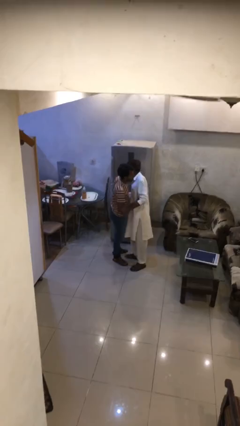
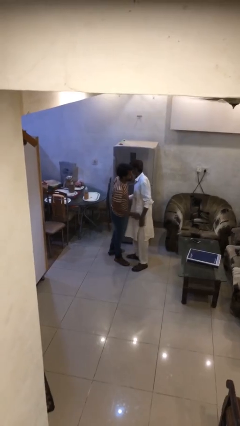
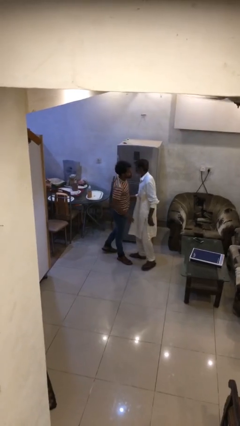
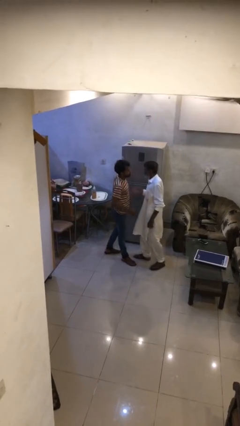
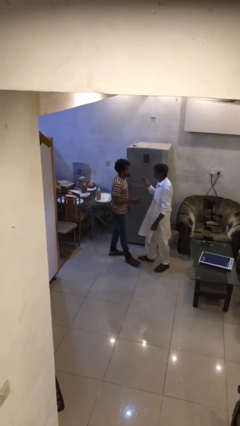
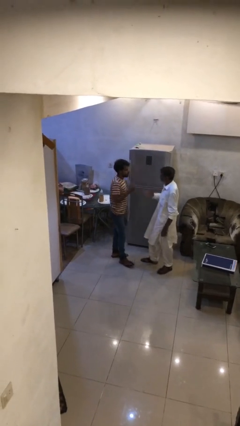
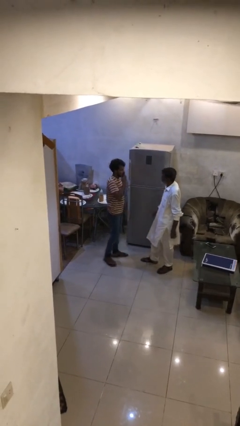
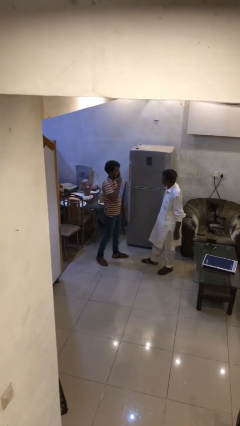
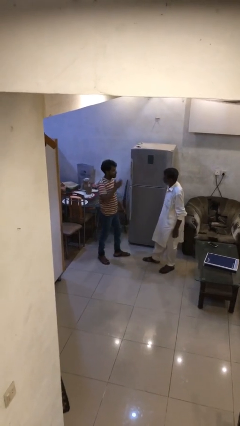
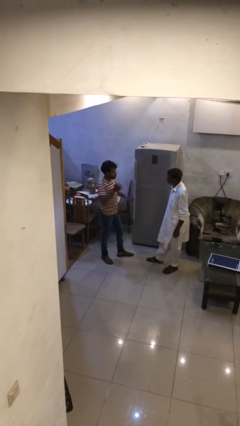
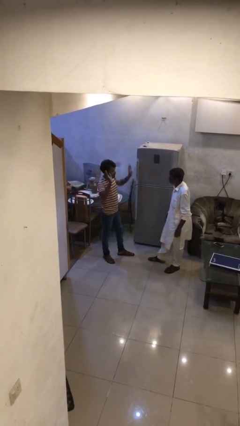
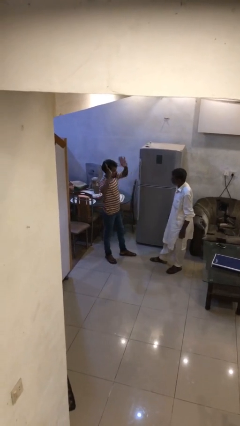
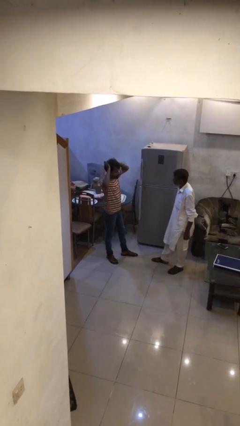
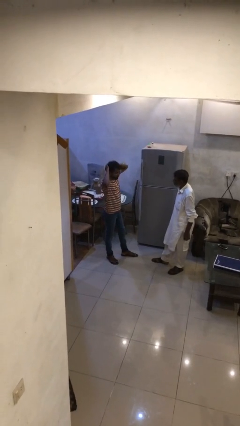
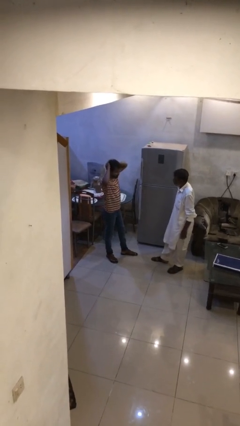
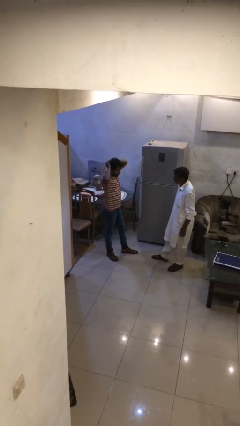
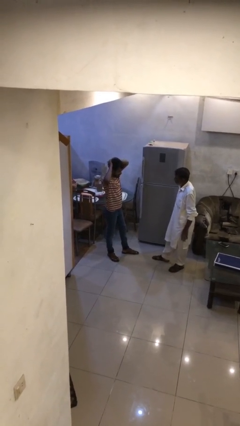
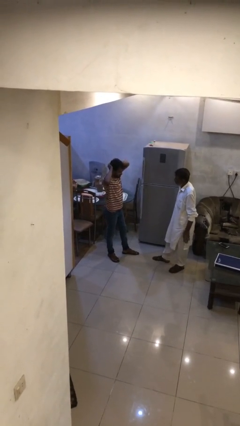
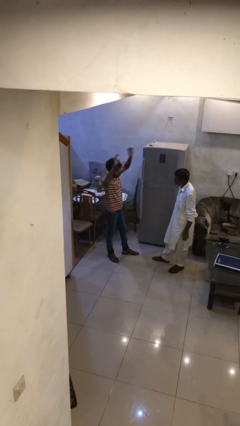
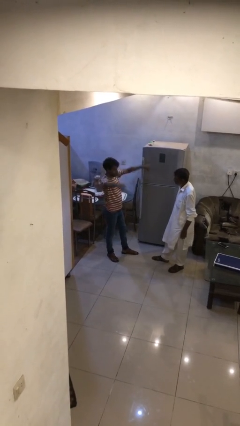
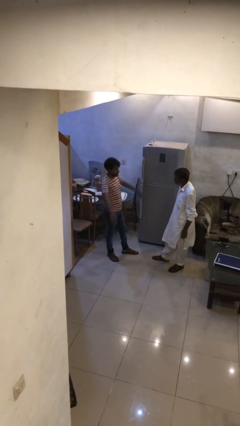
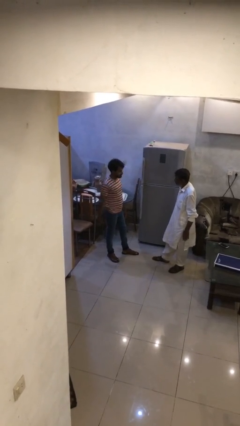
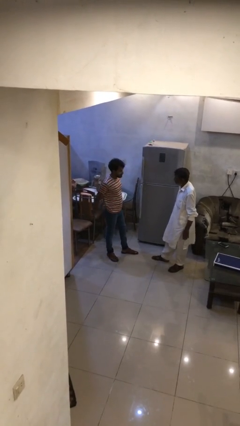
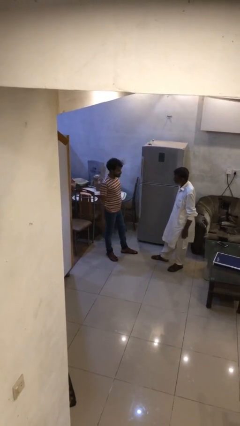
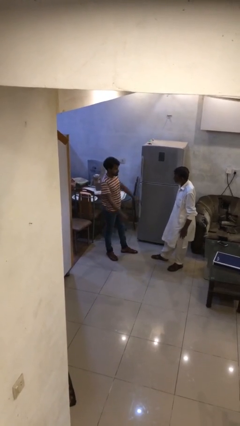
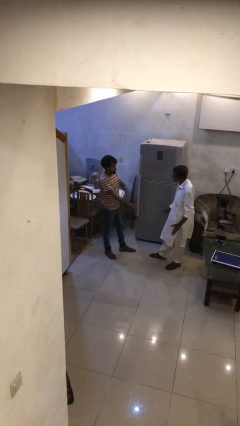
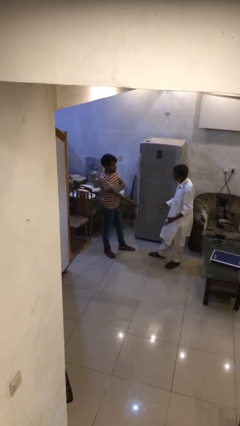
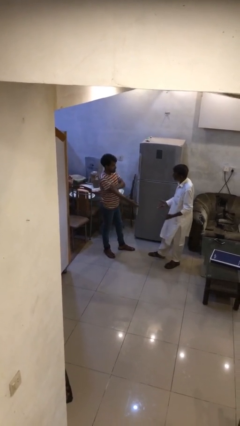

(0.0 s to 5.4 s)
person talks to person

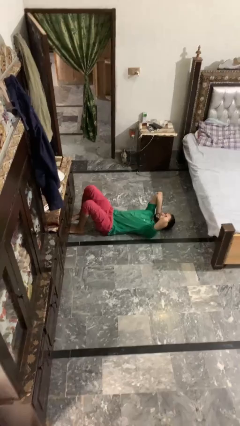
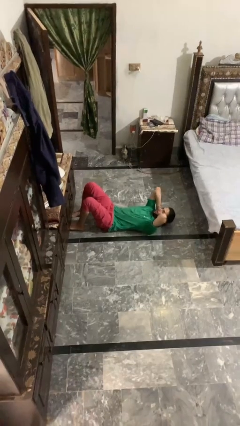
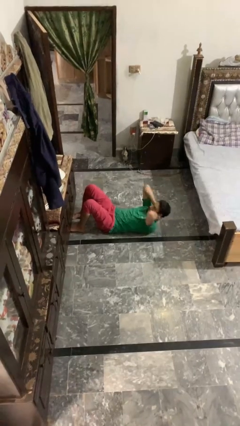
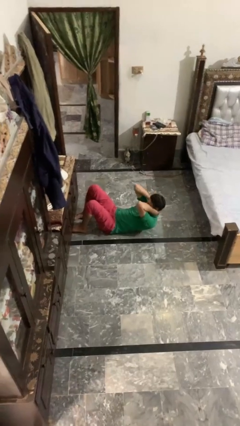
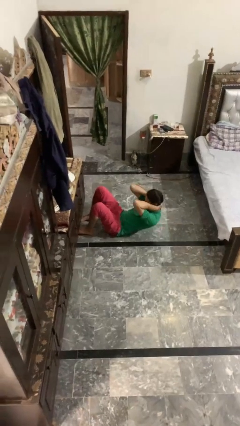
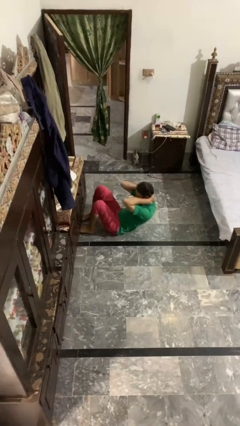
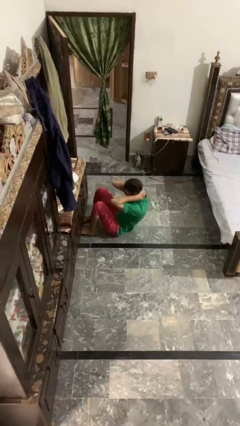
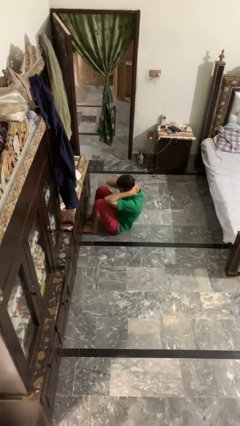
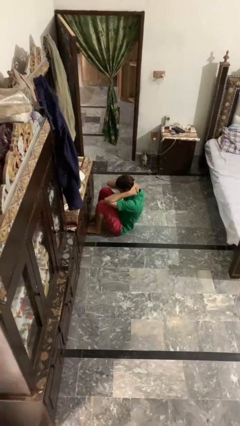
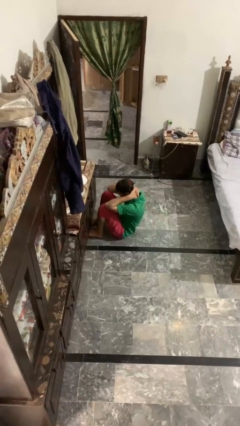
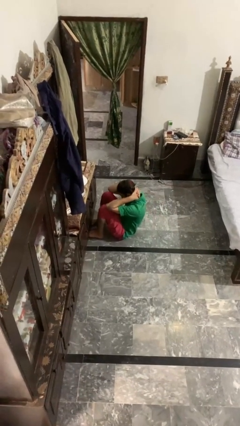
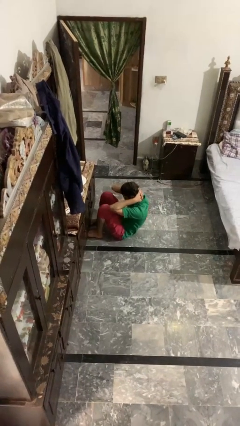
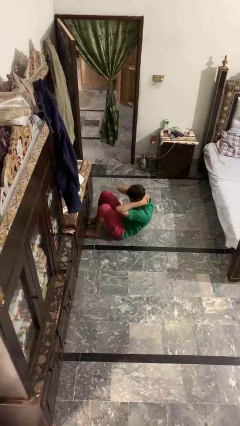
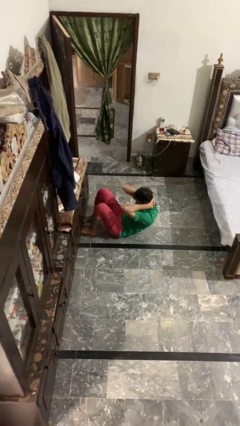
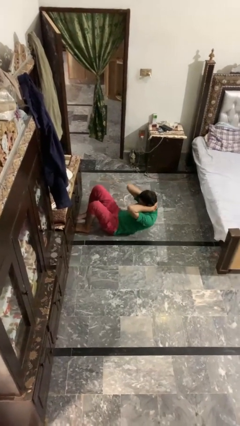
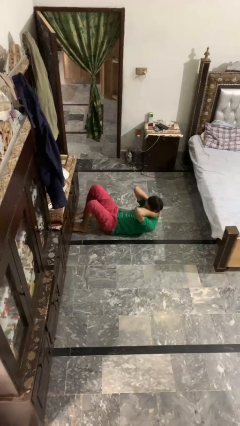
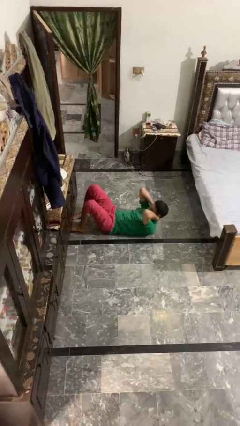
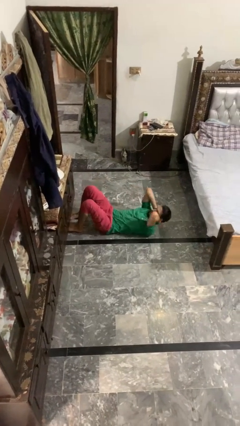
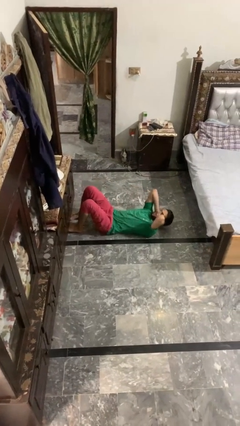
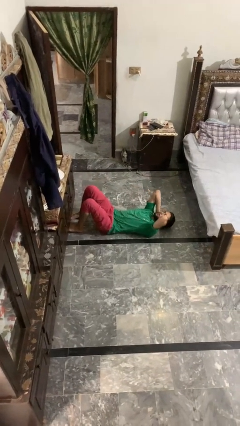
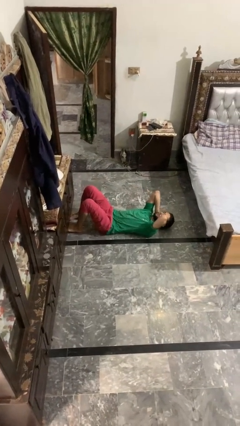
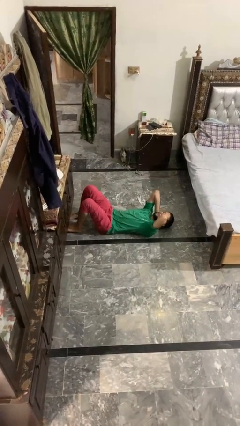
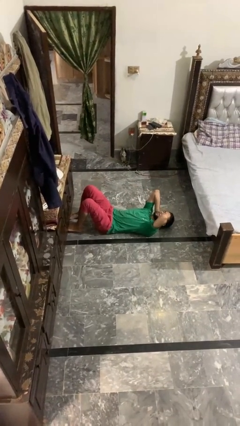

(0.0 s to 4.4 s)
person exercises with situp

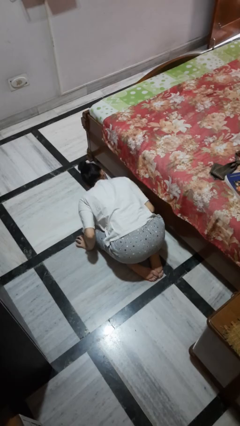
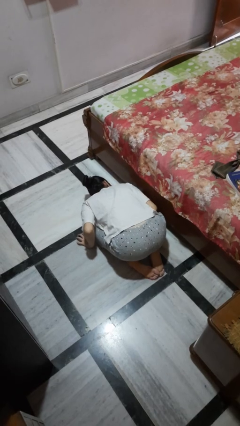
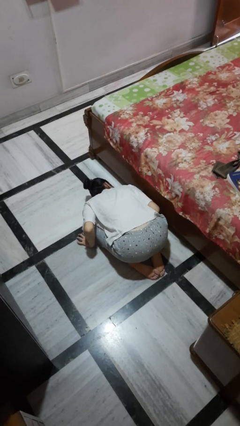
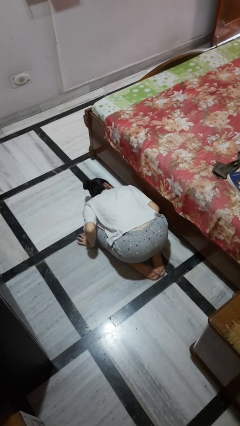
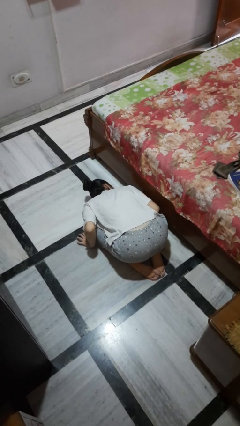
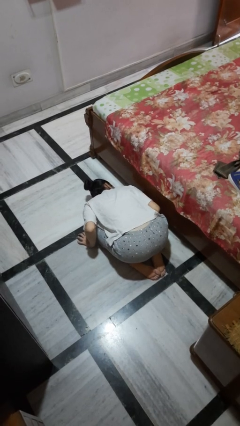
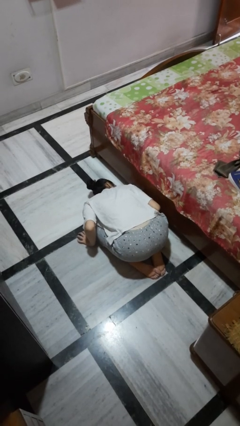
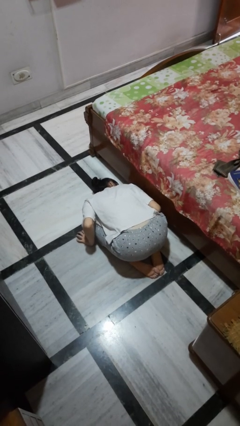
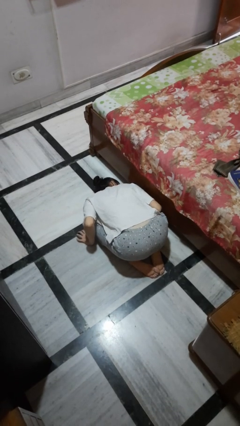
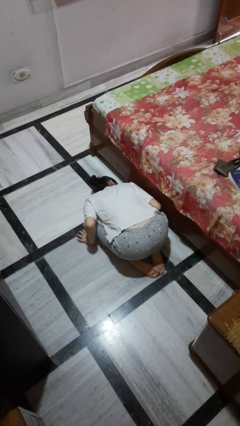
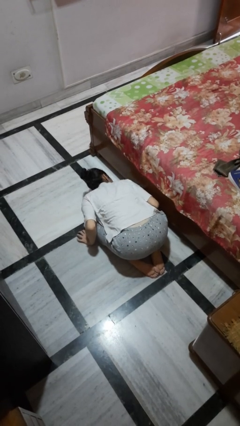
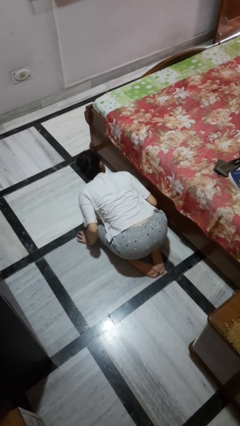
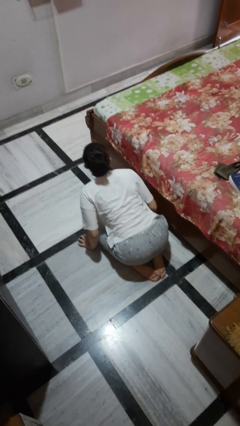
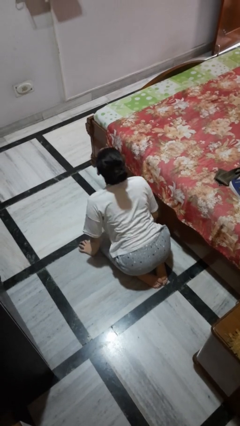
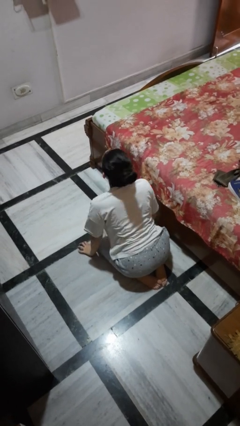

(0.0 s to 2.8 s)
person searches under bed

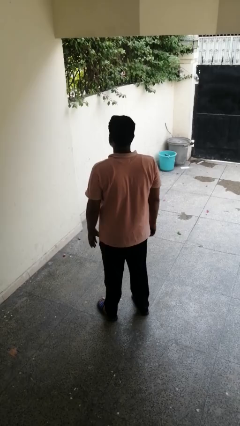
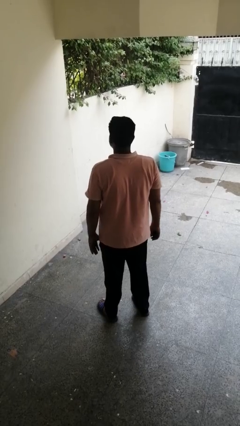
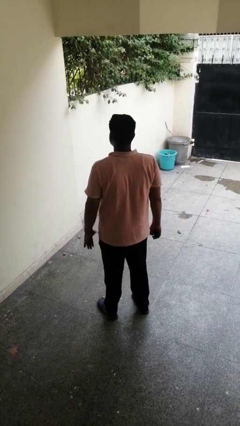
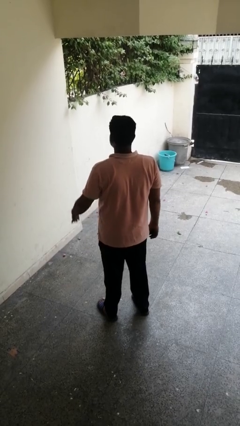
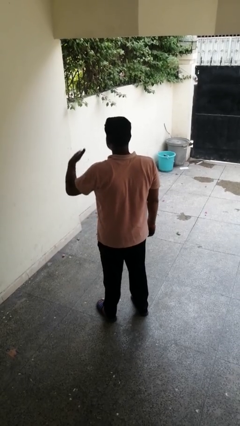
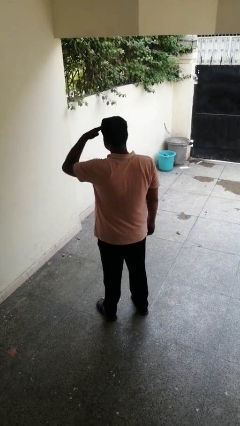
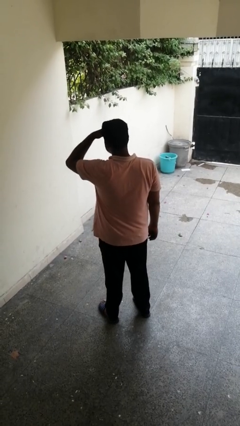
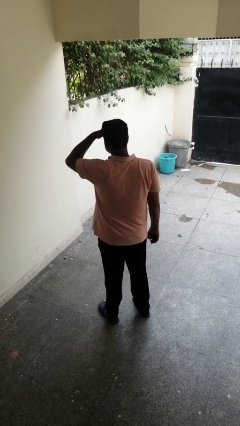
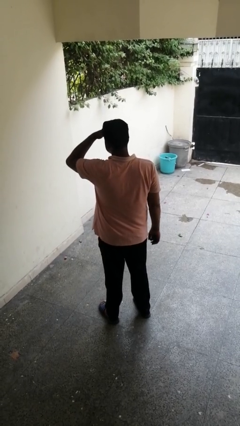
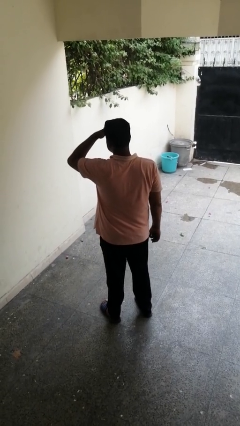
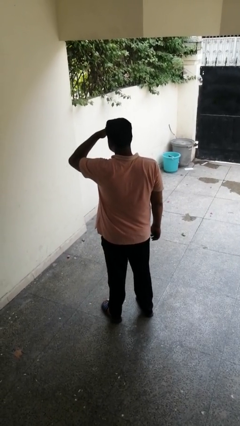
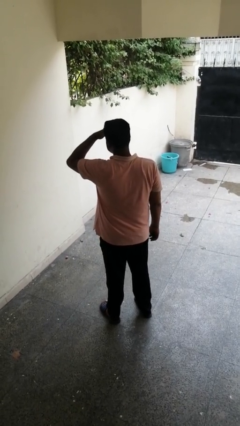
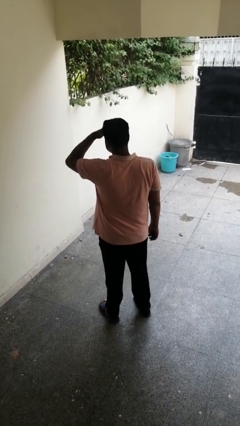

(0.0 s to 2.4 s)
person shades eyes

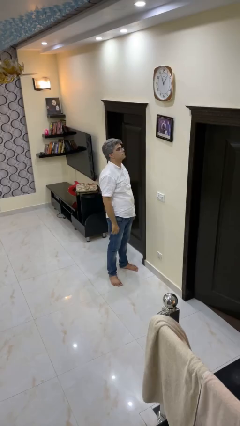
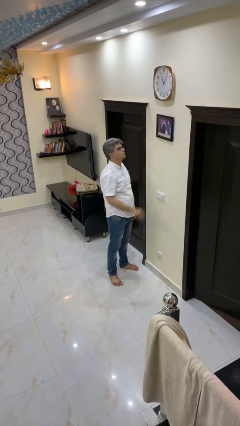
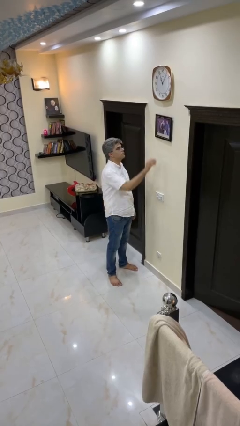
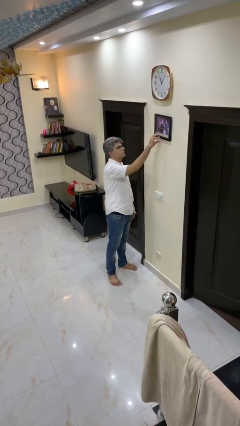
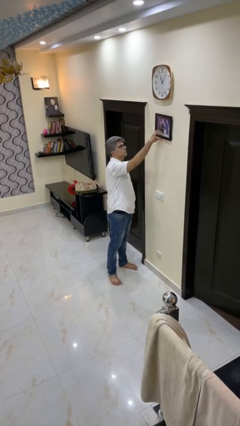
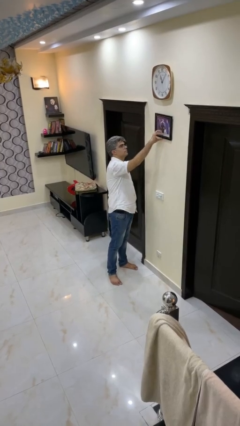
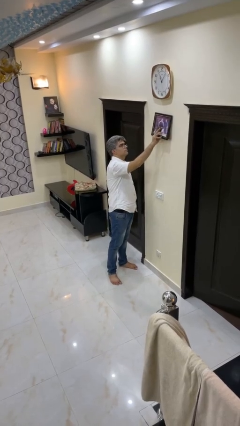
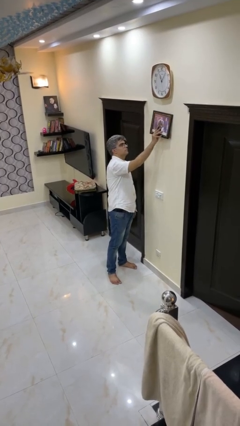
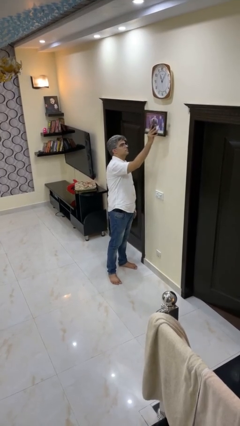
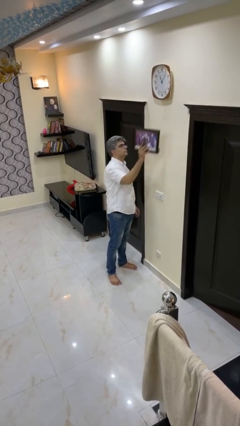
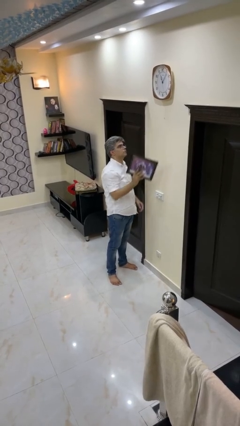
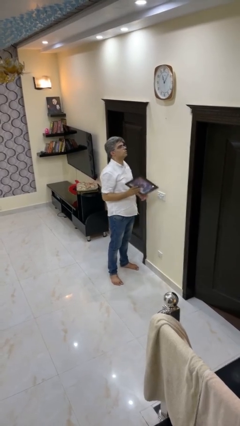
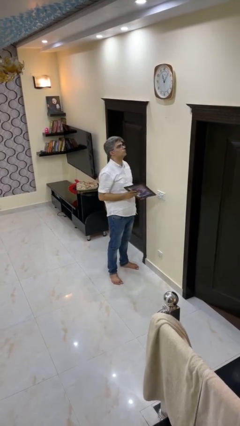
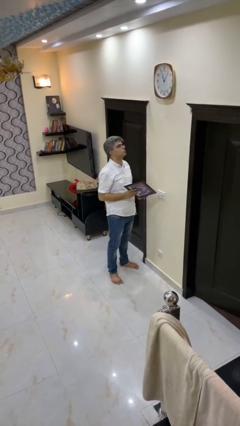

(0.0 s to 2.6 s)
person takes down picture frame
